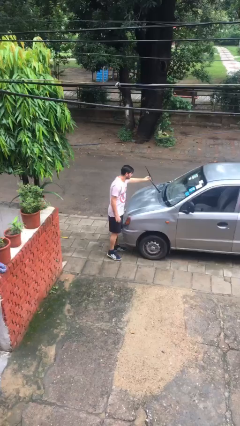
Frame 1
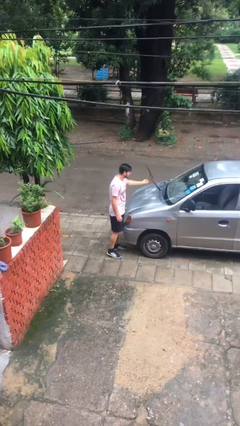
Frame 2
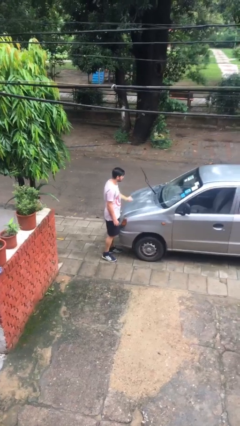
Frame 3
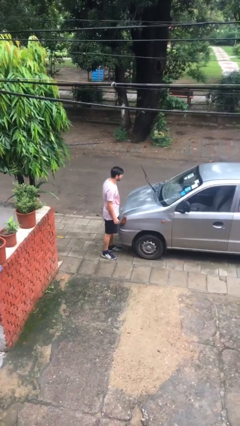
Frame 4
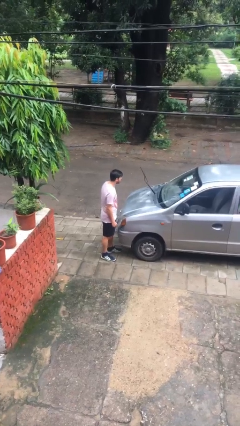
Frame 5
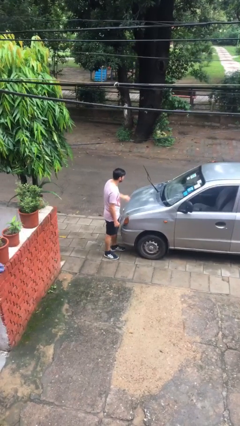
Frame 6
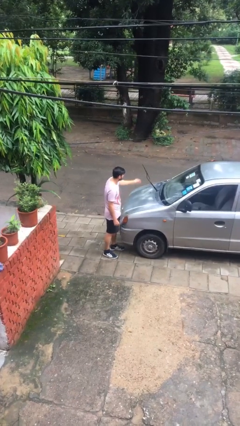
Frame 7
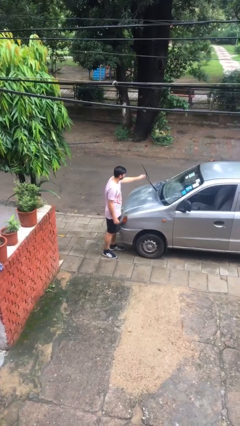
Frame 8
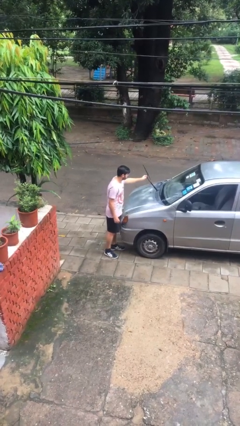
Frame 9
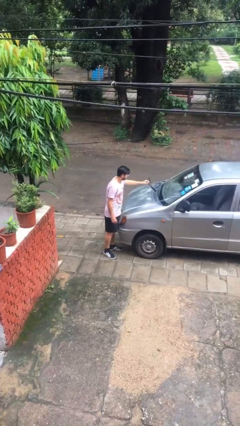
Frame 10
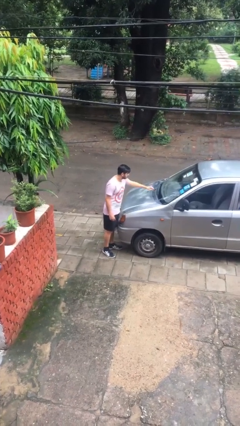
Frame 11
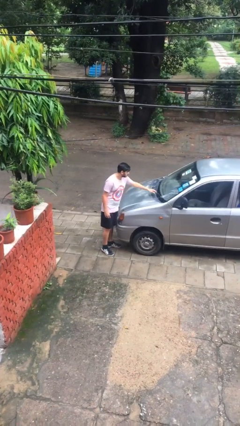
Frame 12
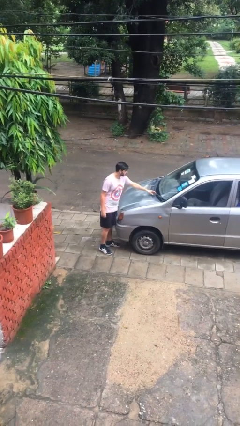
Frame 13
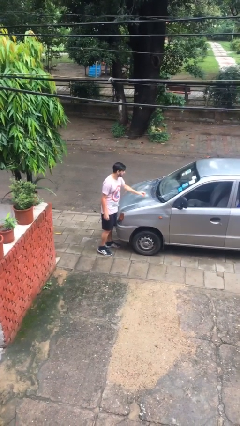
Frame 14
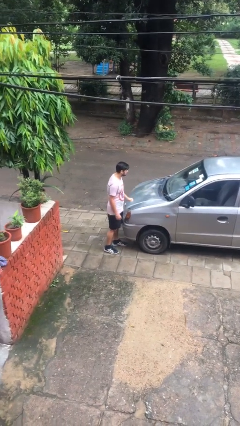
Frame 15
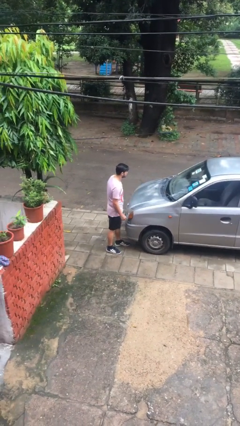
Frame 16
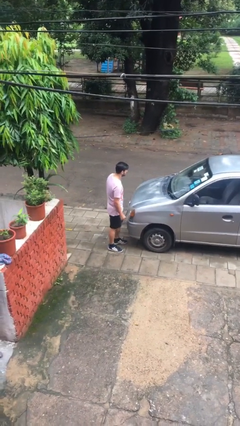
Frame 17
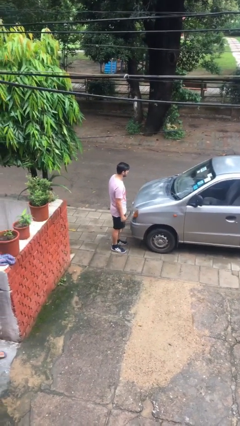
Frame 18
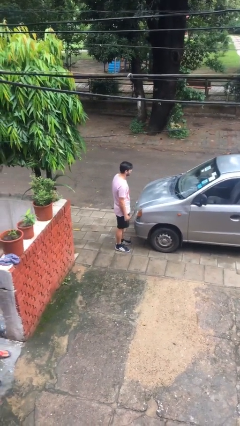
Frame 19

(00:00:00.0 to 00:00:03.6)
person flips down car wipers

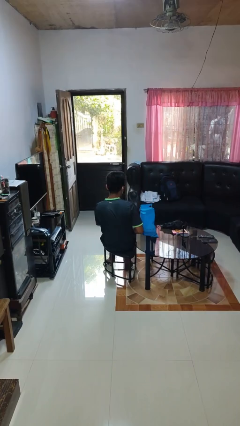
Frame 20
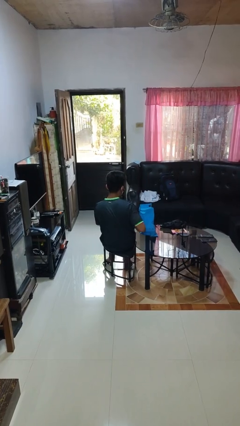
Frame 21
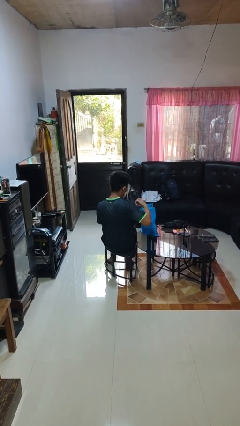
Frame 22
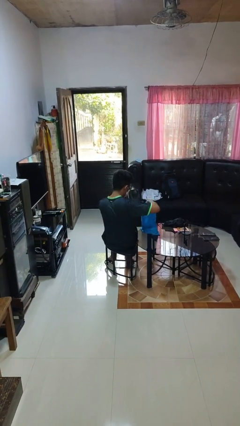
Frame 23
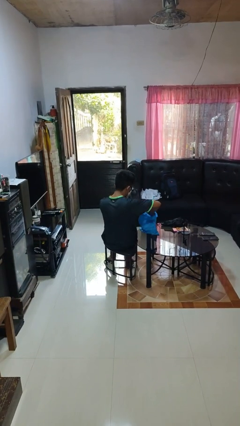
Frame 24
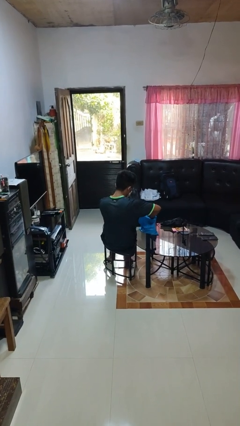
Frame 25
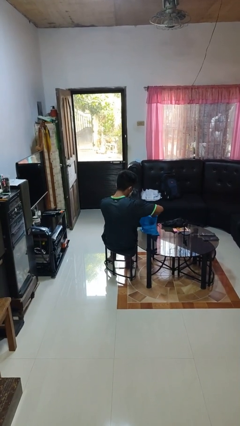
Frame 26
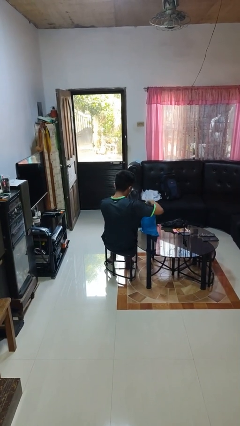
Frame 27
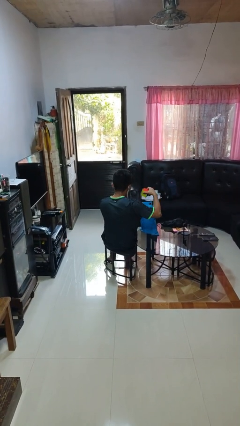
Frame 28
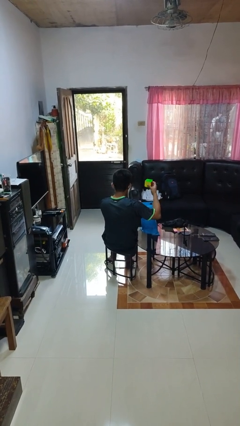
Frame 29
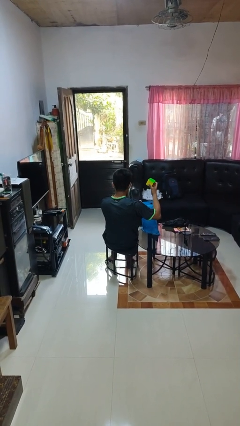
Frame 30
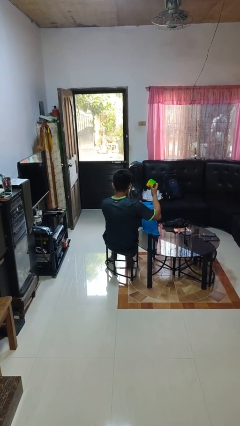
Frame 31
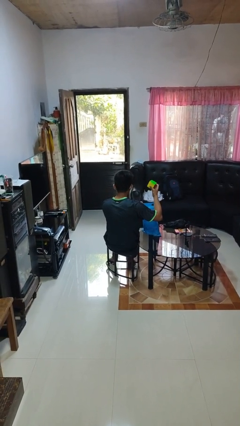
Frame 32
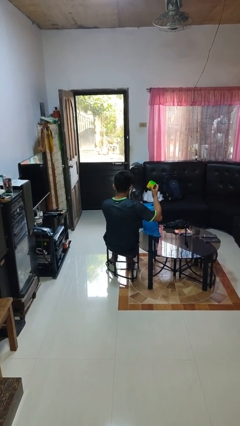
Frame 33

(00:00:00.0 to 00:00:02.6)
person takes object from bag

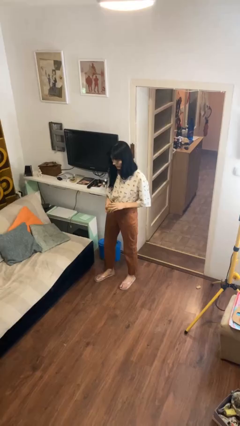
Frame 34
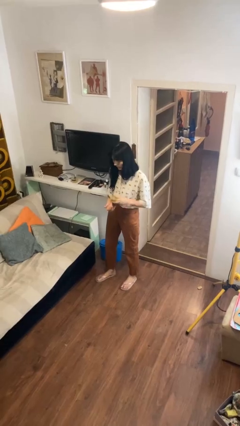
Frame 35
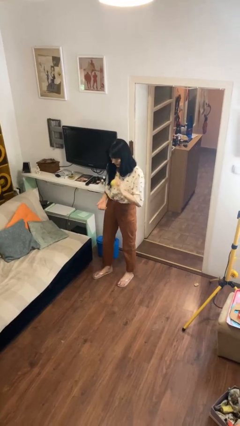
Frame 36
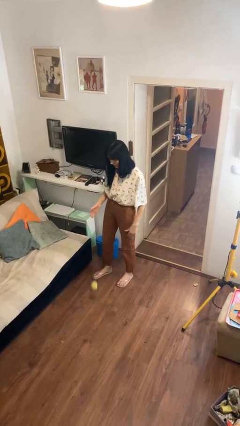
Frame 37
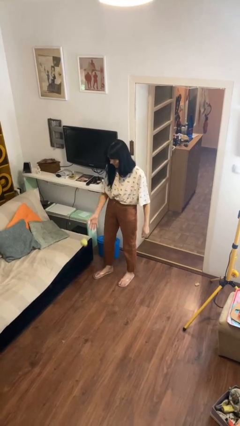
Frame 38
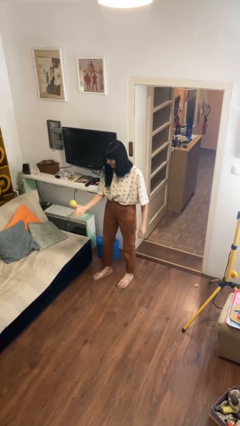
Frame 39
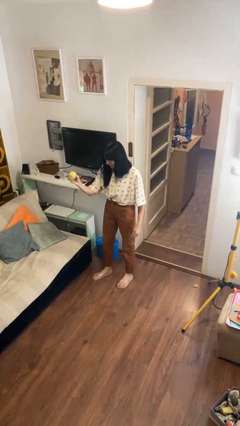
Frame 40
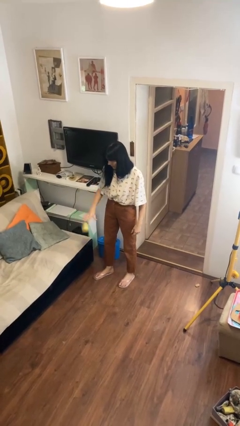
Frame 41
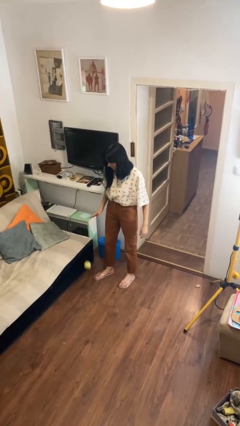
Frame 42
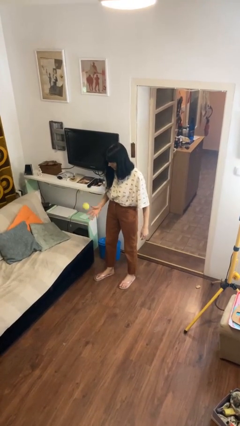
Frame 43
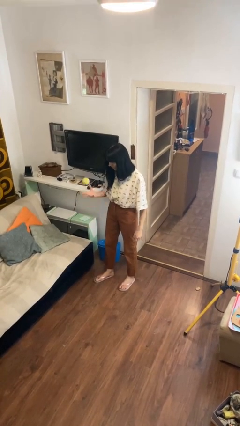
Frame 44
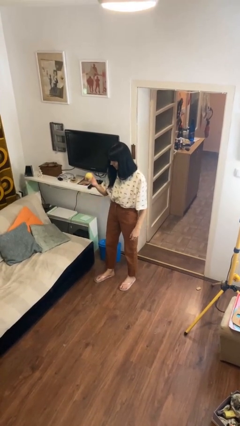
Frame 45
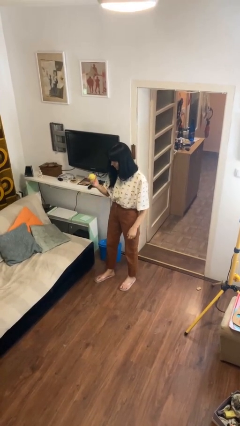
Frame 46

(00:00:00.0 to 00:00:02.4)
person bounces ball on floor

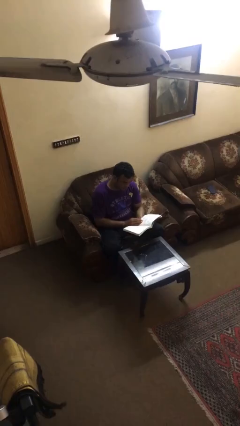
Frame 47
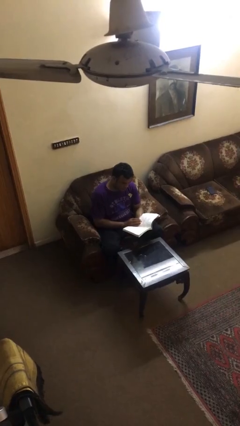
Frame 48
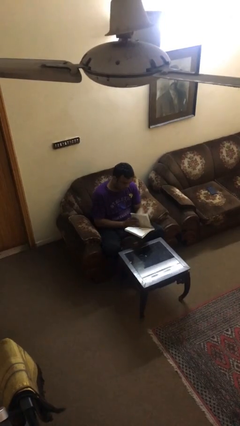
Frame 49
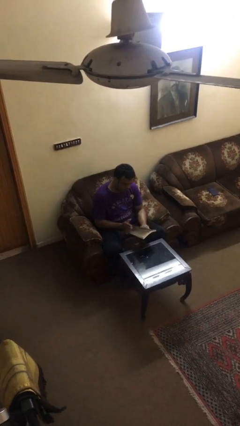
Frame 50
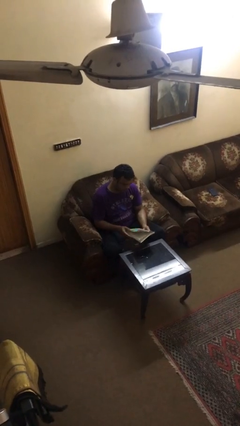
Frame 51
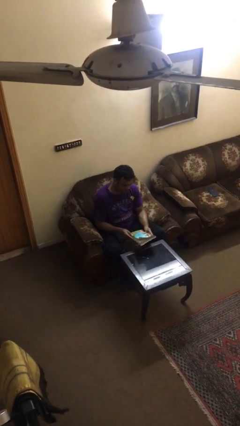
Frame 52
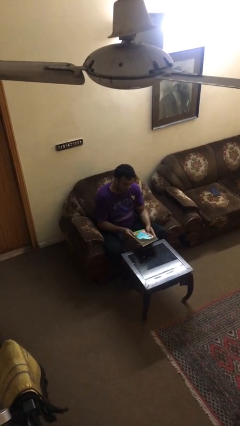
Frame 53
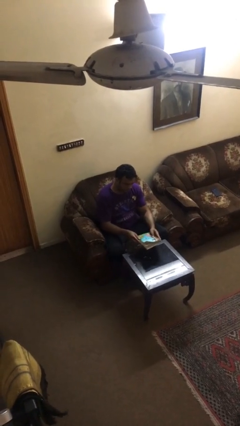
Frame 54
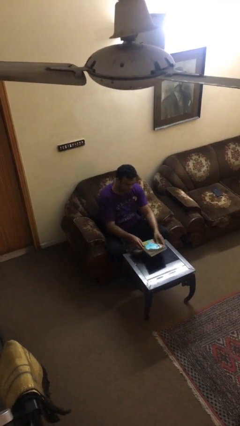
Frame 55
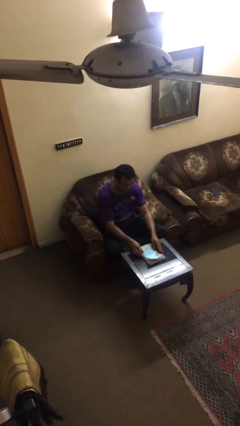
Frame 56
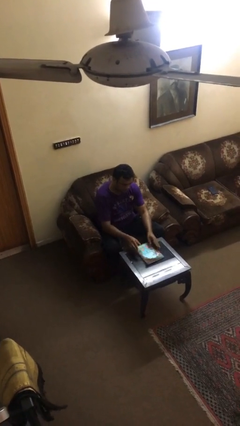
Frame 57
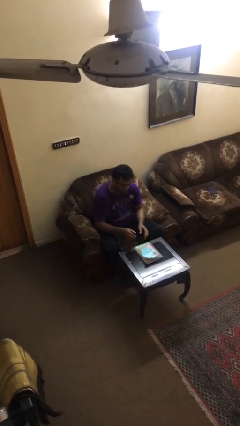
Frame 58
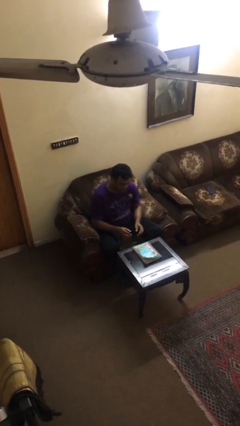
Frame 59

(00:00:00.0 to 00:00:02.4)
person puts down object on table

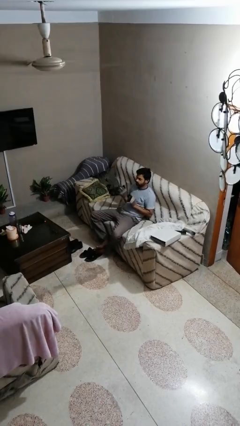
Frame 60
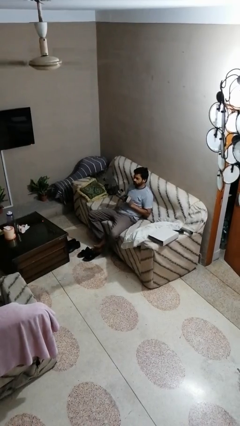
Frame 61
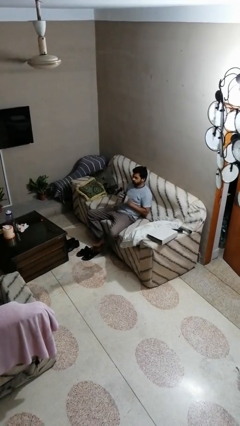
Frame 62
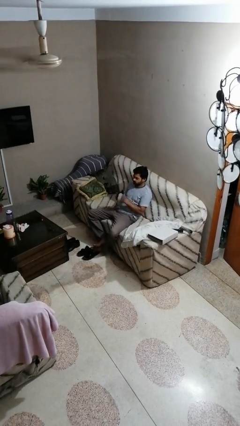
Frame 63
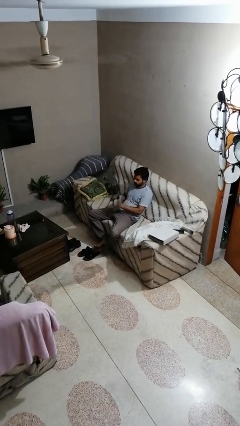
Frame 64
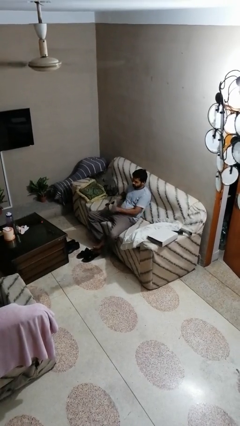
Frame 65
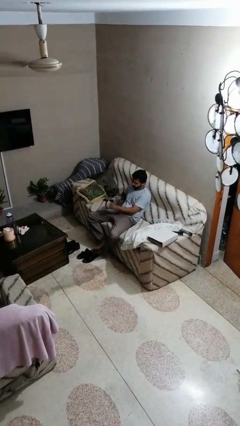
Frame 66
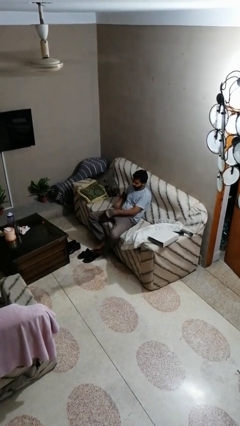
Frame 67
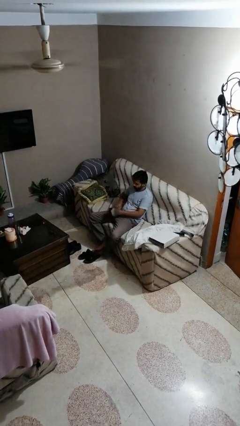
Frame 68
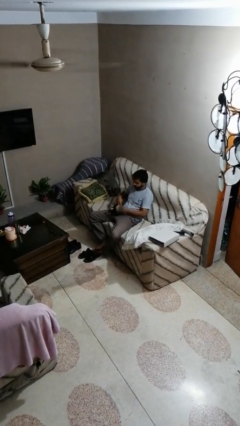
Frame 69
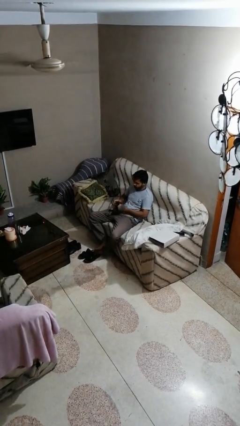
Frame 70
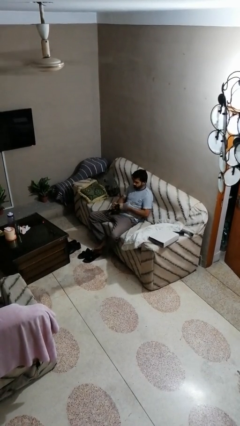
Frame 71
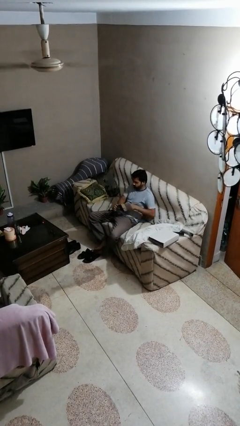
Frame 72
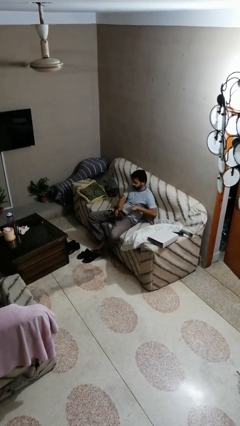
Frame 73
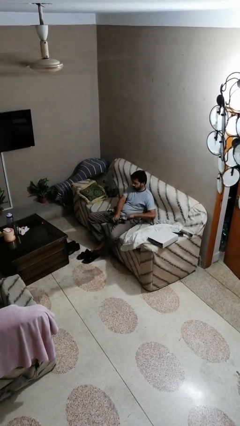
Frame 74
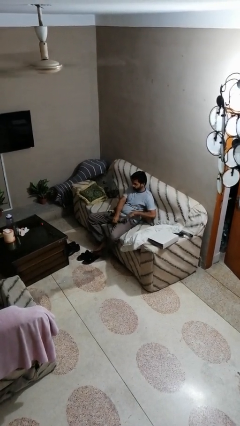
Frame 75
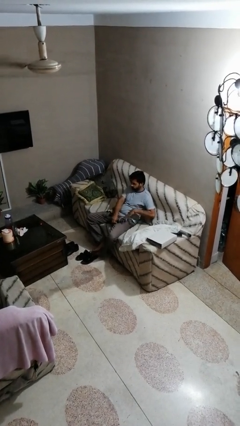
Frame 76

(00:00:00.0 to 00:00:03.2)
person takes off gloves

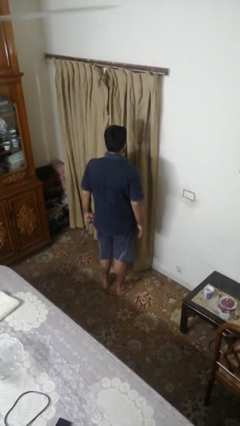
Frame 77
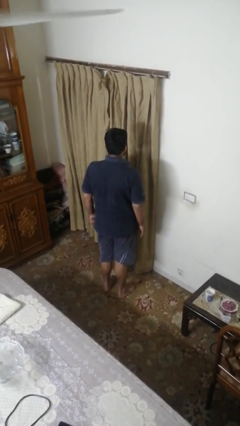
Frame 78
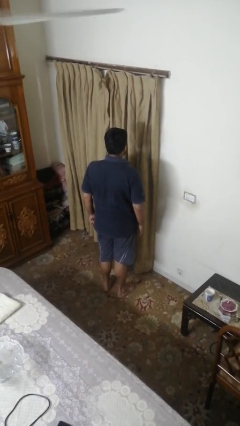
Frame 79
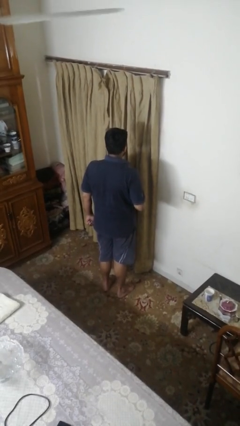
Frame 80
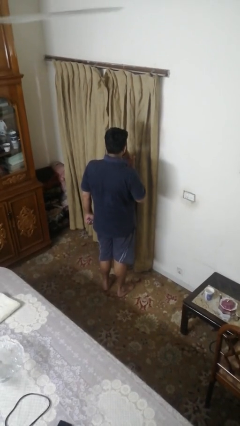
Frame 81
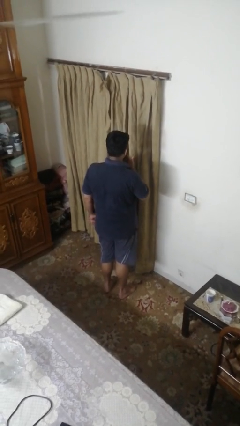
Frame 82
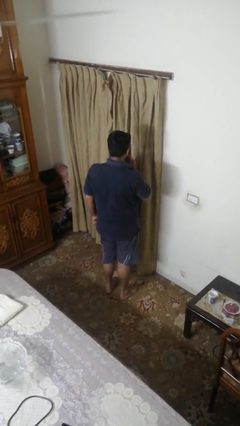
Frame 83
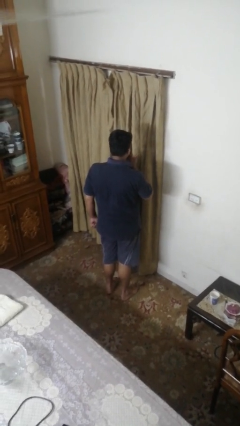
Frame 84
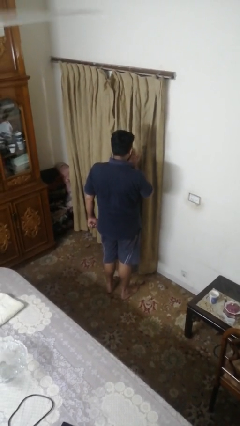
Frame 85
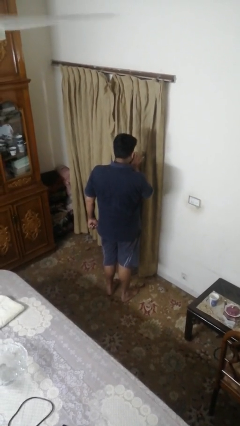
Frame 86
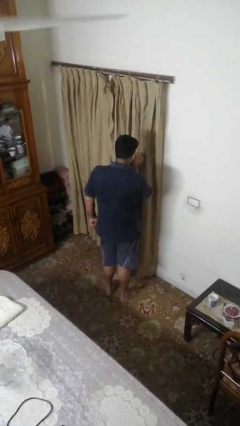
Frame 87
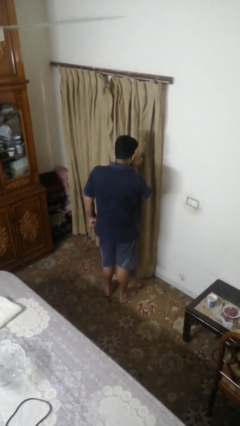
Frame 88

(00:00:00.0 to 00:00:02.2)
person gestures blow kiss

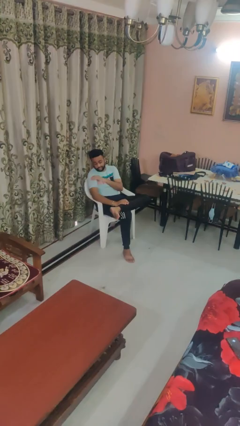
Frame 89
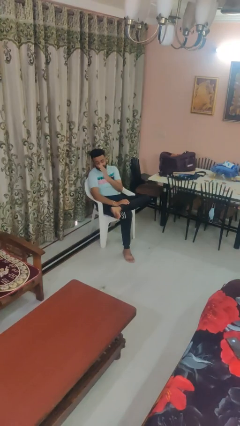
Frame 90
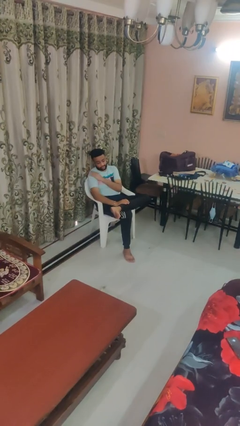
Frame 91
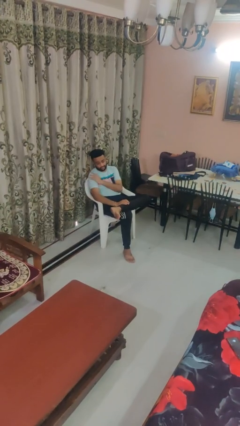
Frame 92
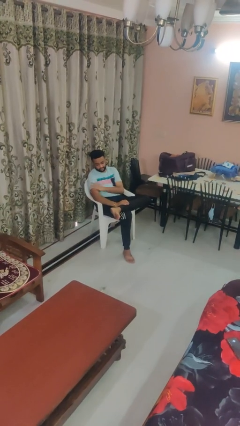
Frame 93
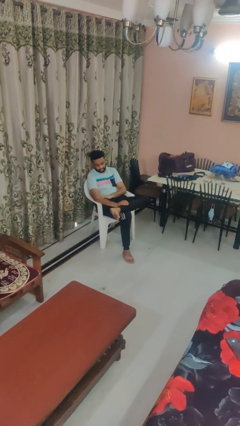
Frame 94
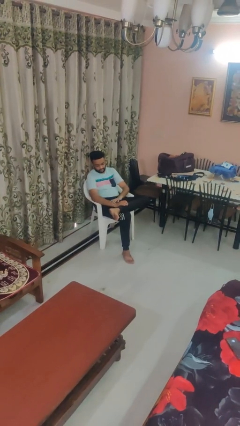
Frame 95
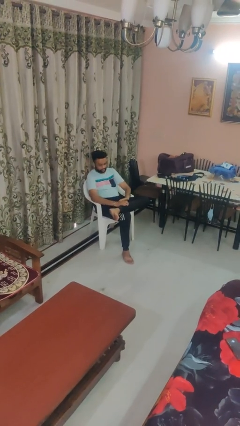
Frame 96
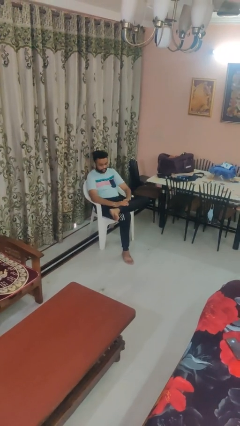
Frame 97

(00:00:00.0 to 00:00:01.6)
person swats bug
